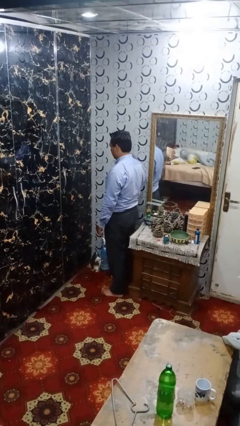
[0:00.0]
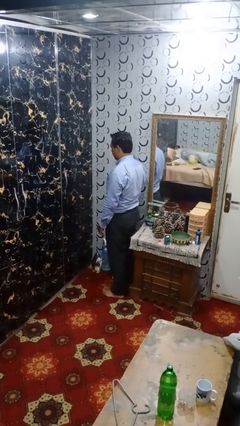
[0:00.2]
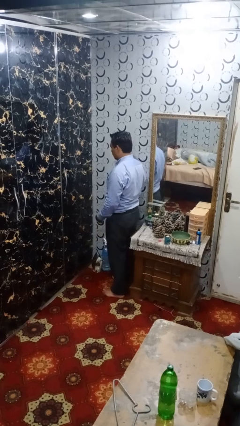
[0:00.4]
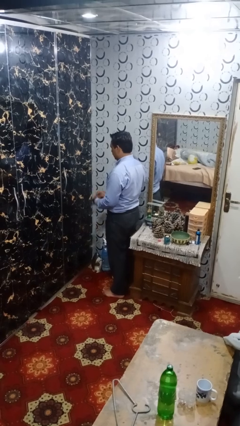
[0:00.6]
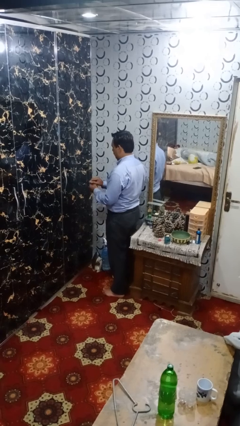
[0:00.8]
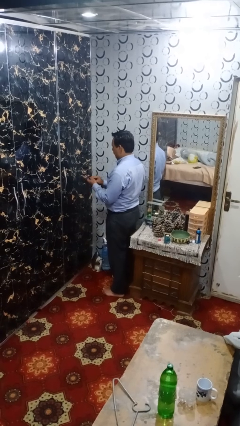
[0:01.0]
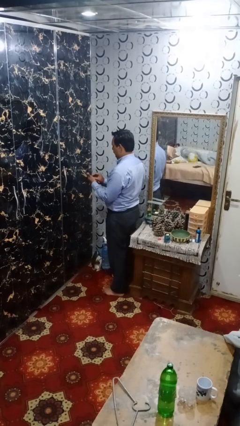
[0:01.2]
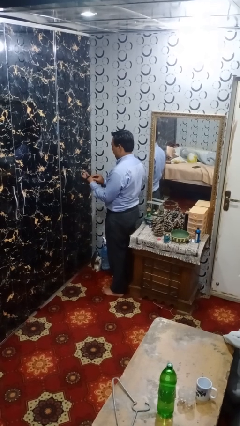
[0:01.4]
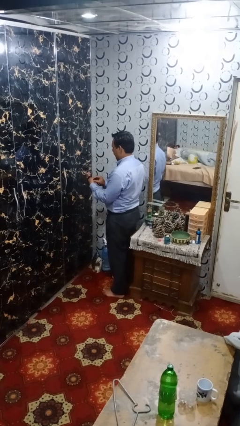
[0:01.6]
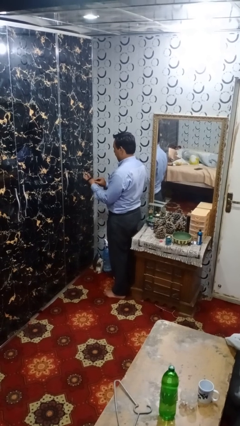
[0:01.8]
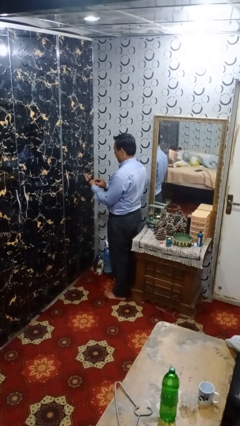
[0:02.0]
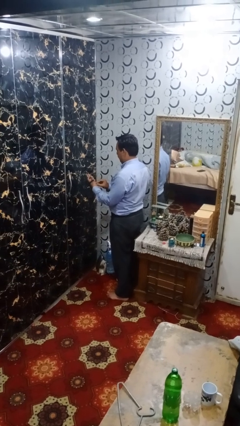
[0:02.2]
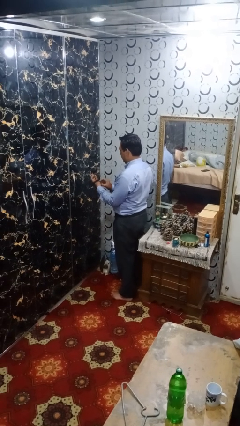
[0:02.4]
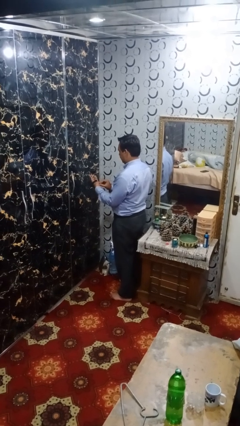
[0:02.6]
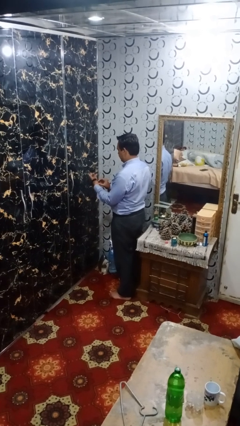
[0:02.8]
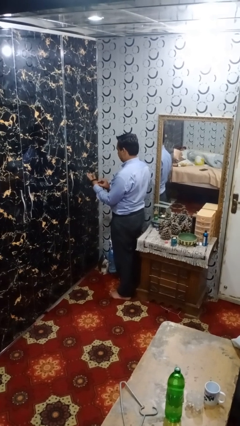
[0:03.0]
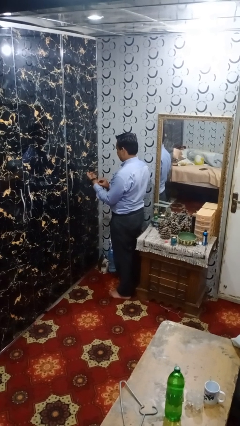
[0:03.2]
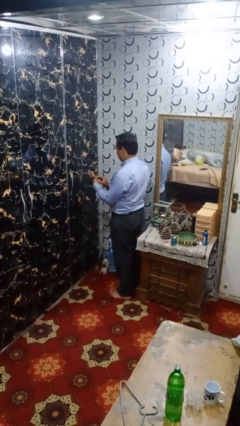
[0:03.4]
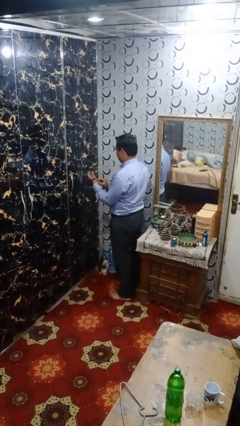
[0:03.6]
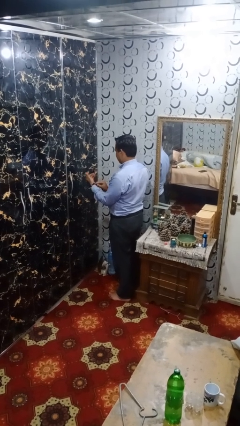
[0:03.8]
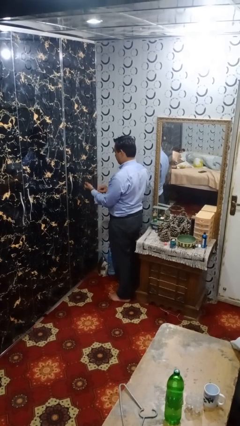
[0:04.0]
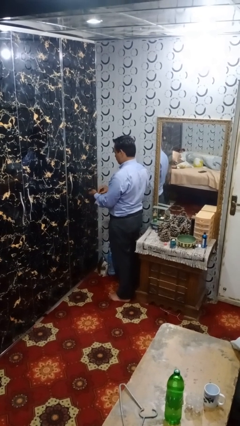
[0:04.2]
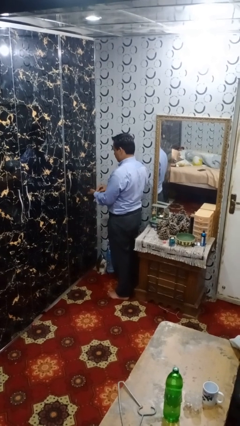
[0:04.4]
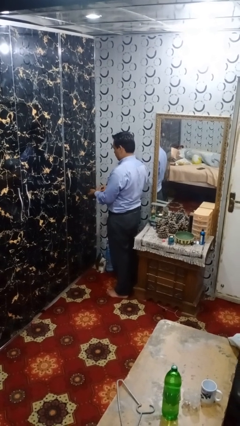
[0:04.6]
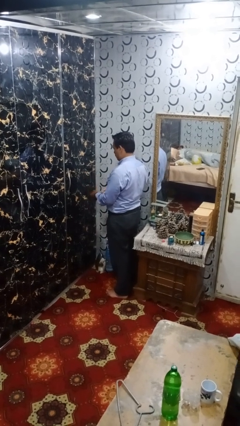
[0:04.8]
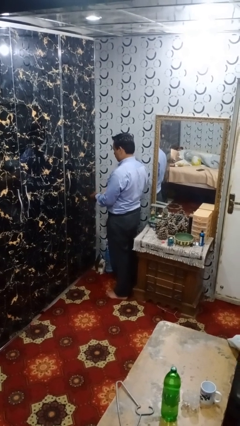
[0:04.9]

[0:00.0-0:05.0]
person puts on wristwatch

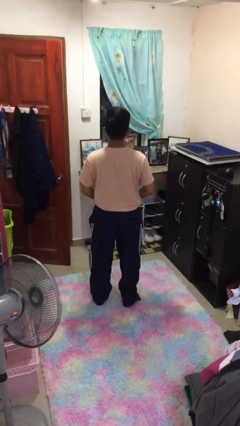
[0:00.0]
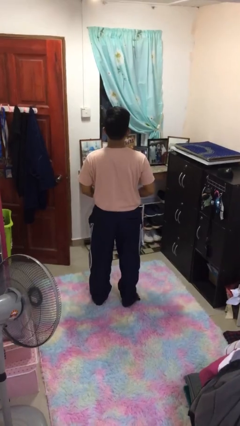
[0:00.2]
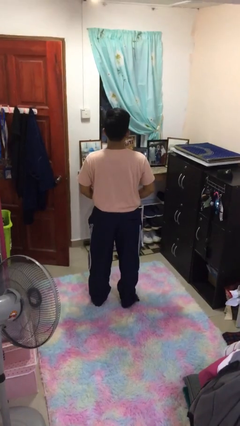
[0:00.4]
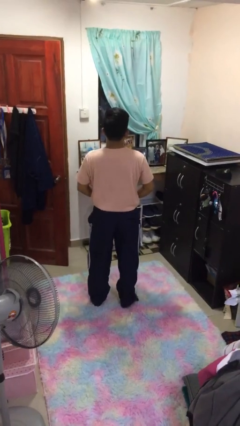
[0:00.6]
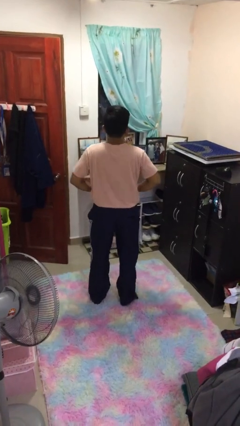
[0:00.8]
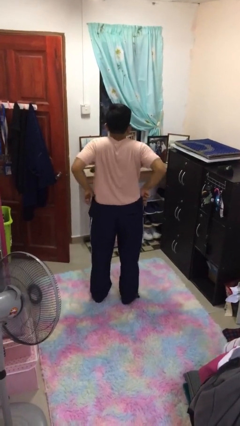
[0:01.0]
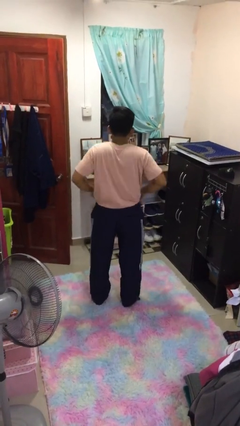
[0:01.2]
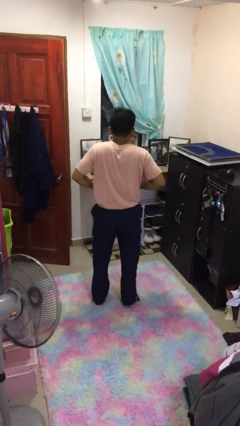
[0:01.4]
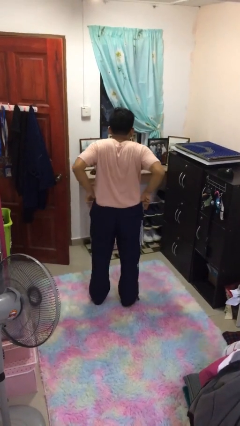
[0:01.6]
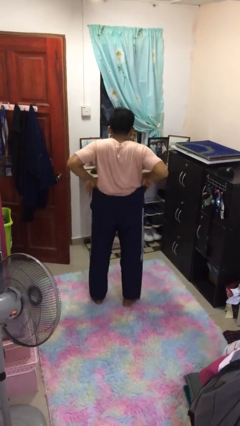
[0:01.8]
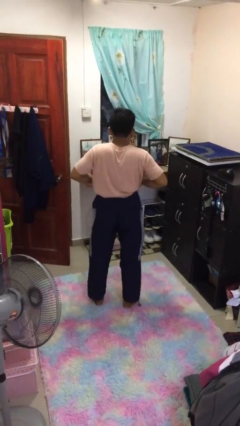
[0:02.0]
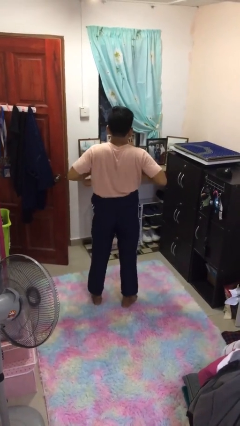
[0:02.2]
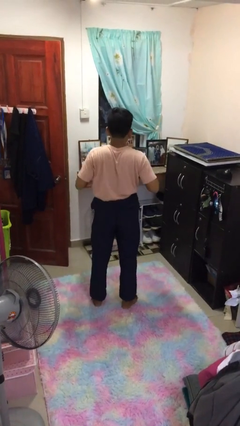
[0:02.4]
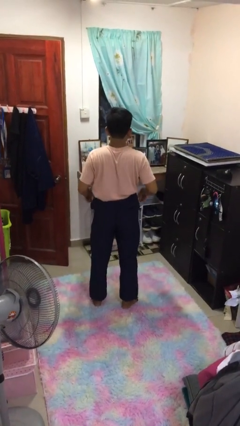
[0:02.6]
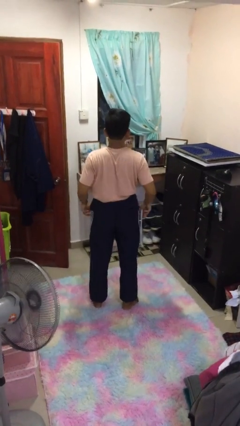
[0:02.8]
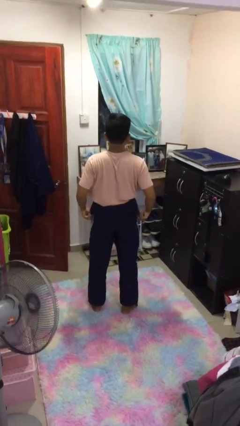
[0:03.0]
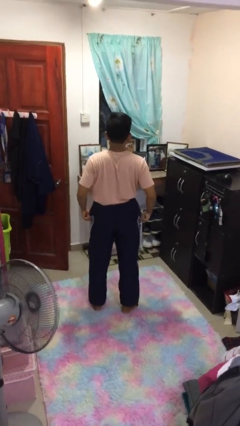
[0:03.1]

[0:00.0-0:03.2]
person hikes up pants

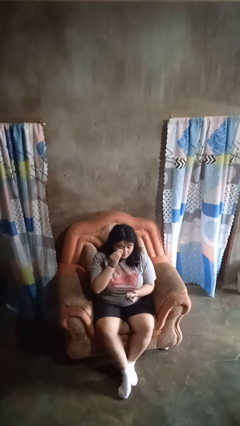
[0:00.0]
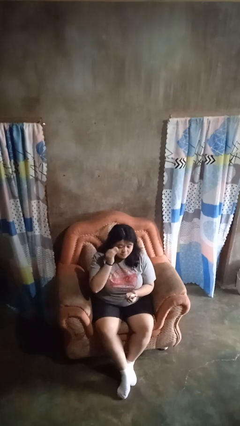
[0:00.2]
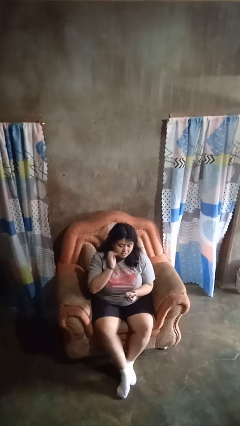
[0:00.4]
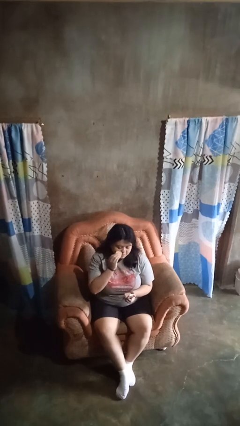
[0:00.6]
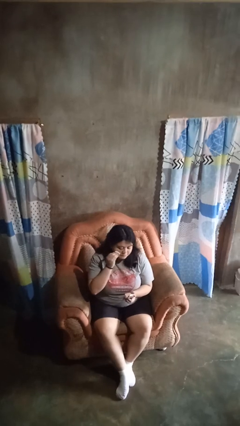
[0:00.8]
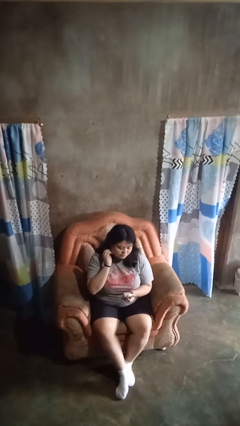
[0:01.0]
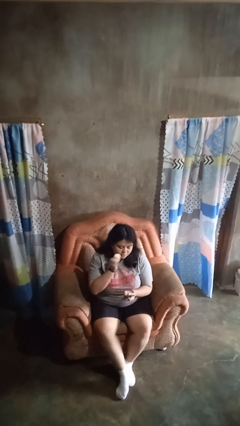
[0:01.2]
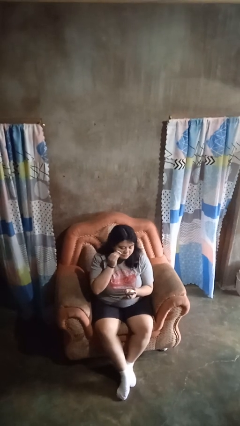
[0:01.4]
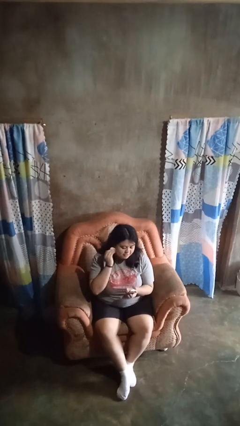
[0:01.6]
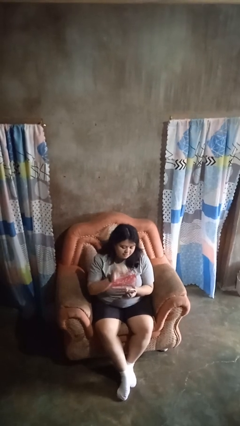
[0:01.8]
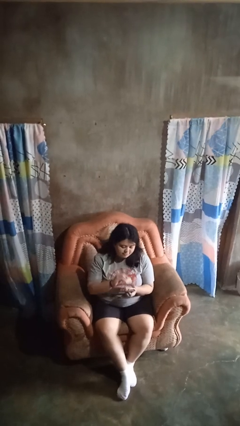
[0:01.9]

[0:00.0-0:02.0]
person applies foundation makeup

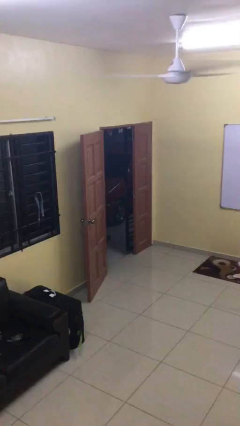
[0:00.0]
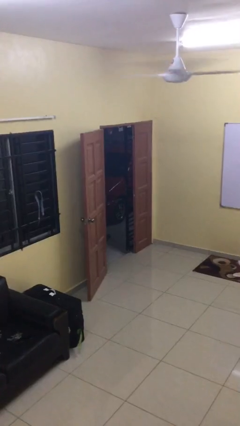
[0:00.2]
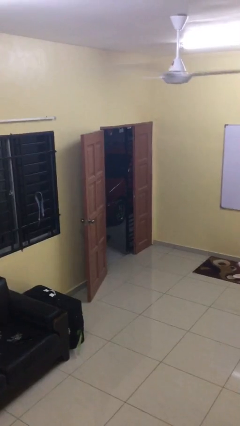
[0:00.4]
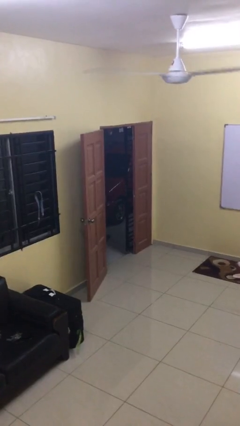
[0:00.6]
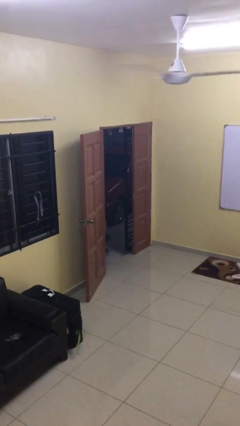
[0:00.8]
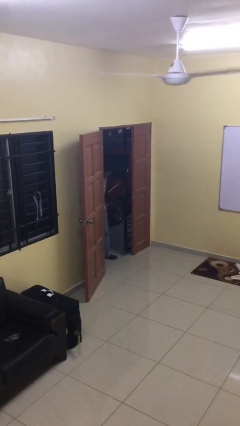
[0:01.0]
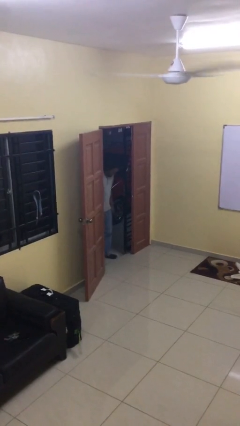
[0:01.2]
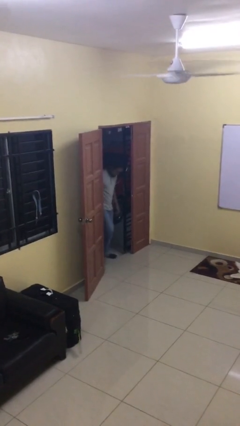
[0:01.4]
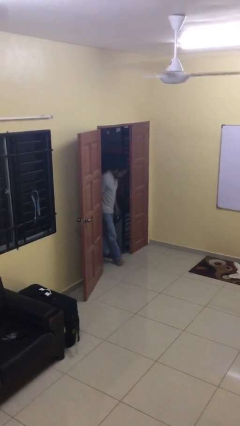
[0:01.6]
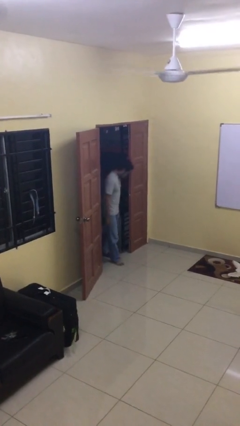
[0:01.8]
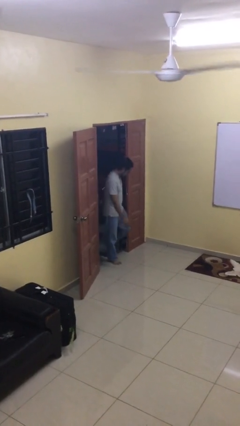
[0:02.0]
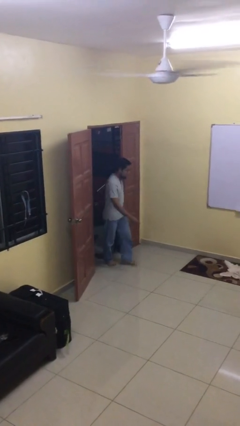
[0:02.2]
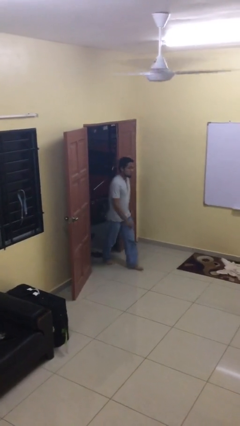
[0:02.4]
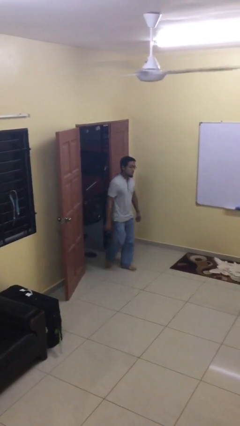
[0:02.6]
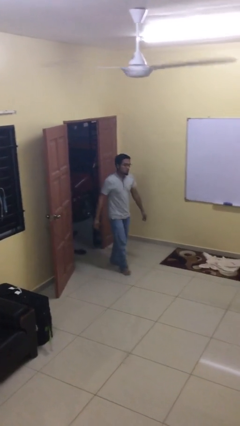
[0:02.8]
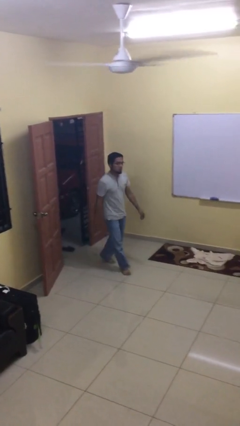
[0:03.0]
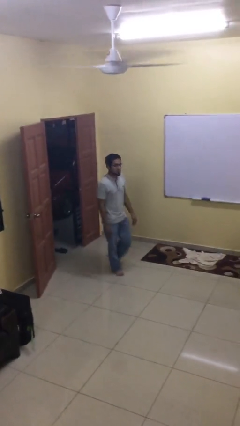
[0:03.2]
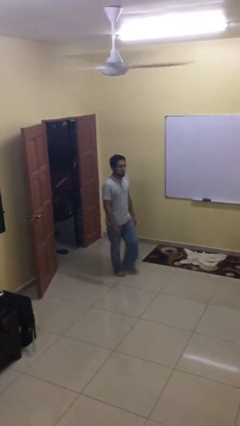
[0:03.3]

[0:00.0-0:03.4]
person enters scene through structure

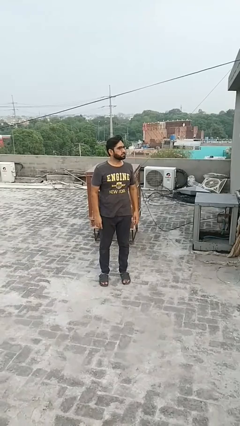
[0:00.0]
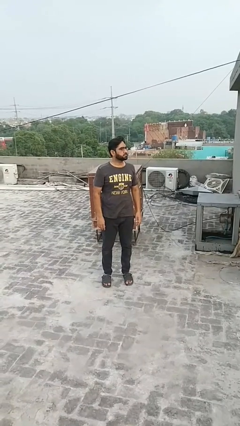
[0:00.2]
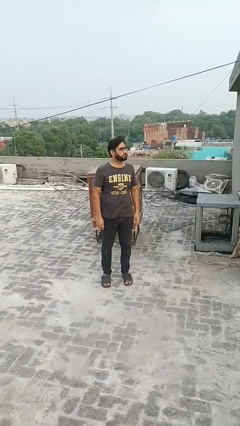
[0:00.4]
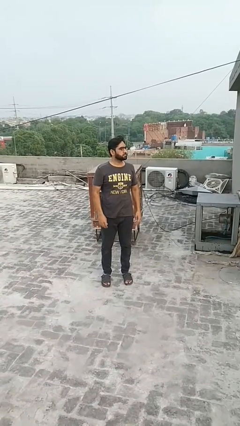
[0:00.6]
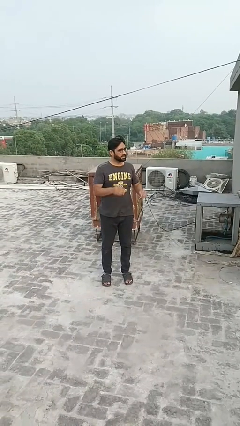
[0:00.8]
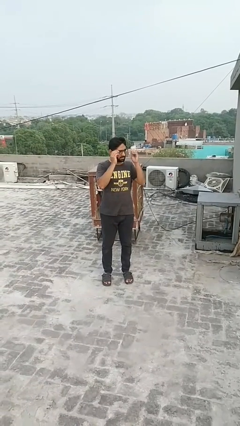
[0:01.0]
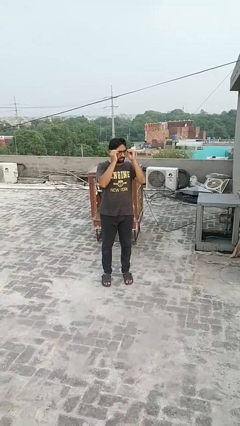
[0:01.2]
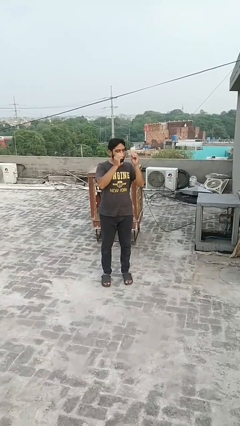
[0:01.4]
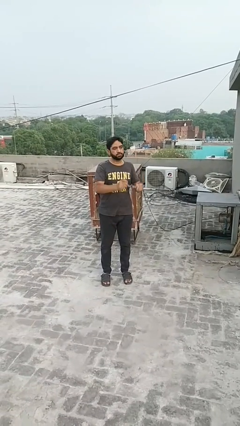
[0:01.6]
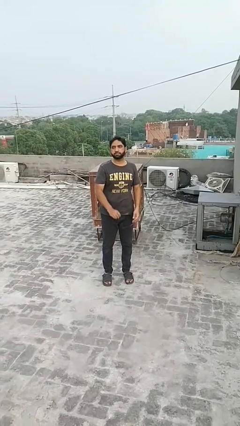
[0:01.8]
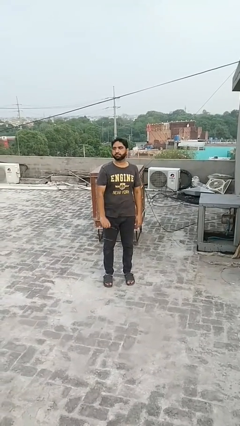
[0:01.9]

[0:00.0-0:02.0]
person takes off glasses

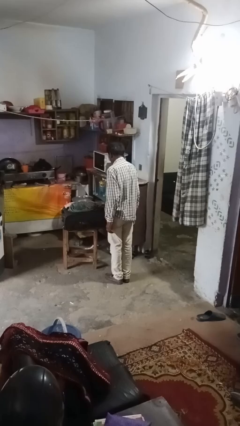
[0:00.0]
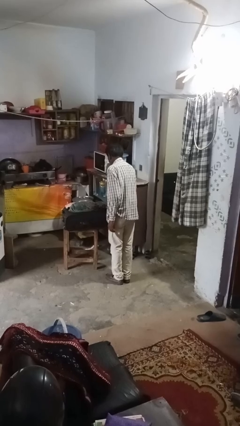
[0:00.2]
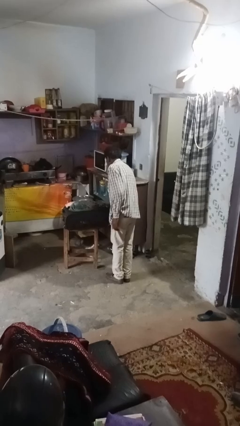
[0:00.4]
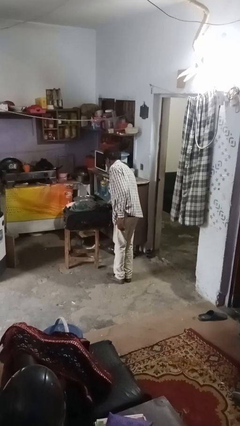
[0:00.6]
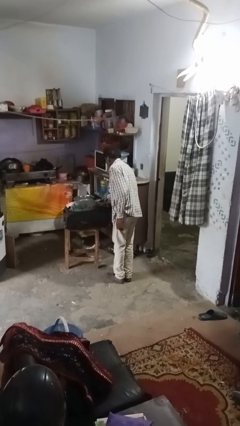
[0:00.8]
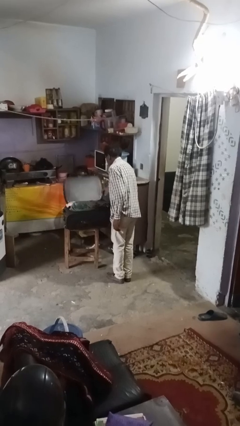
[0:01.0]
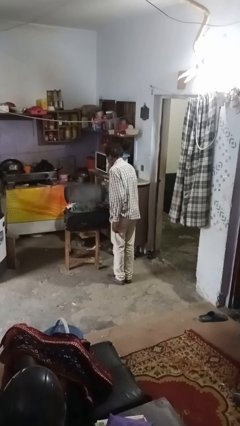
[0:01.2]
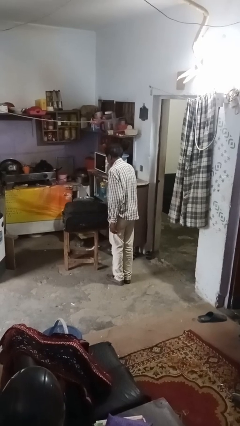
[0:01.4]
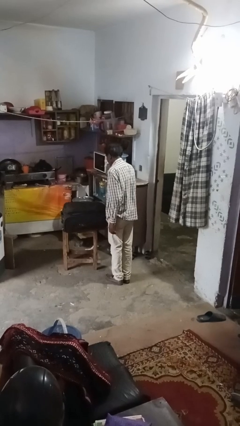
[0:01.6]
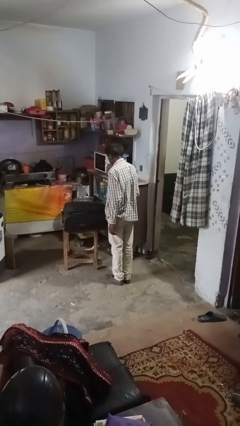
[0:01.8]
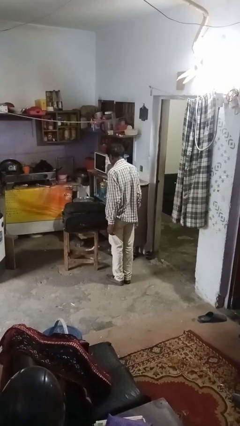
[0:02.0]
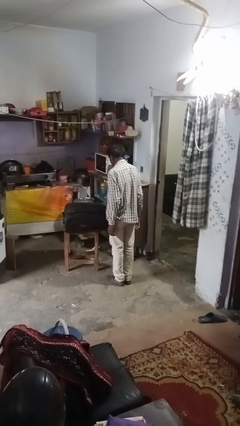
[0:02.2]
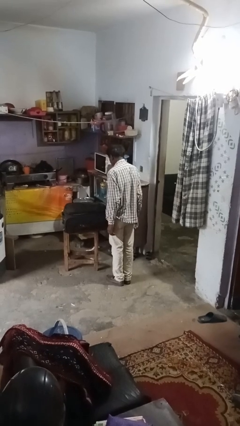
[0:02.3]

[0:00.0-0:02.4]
person closes suitcase
